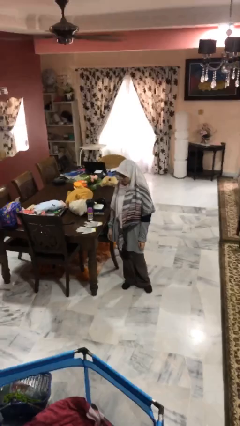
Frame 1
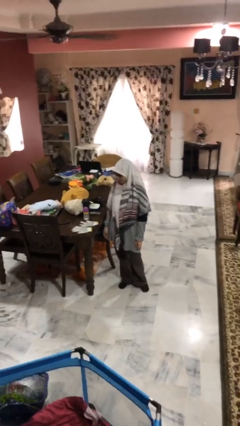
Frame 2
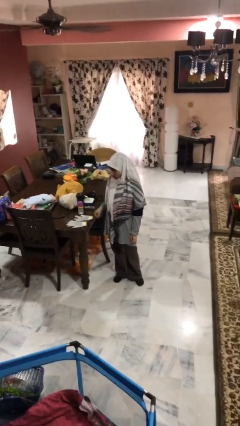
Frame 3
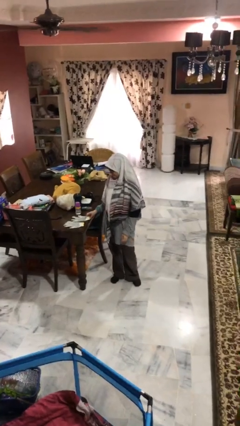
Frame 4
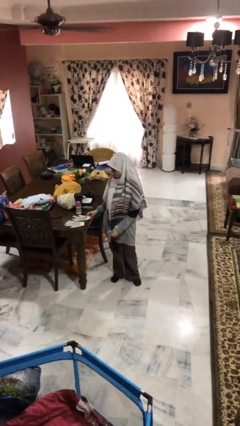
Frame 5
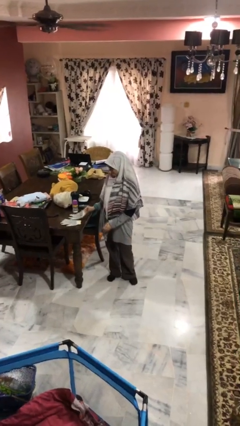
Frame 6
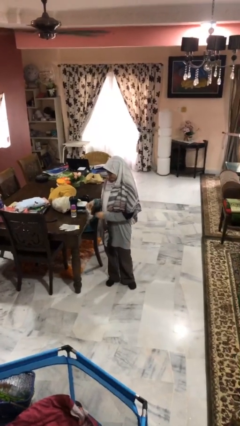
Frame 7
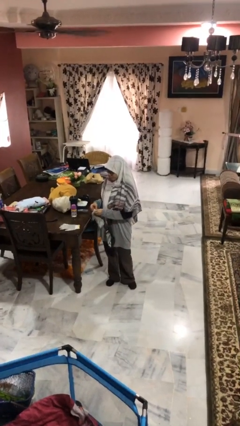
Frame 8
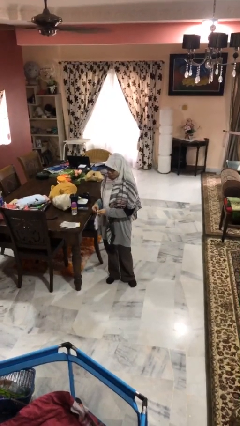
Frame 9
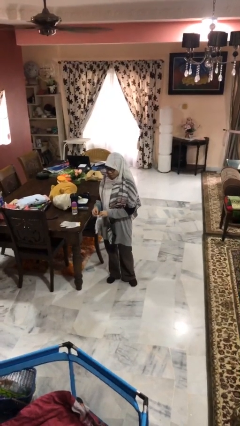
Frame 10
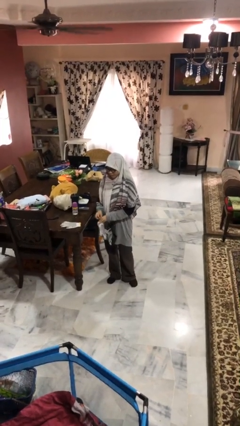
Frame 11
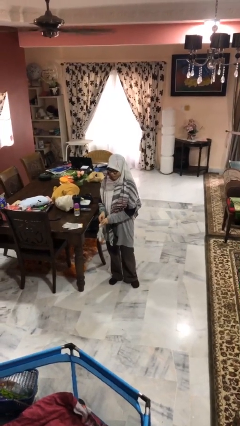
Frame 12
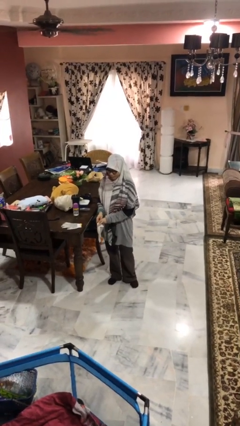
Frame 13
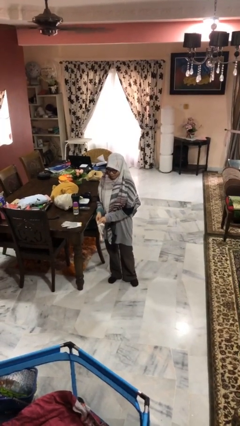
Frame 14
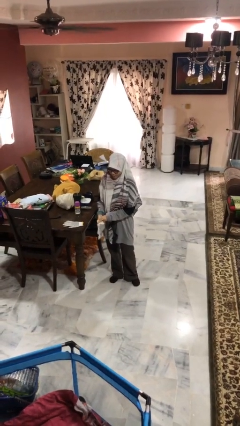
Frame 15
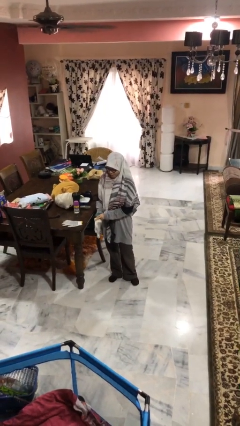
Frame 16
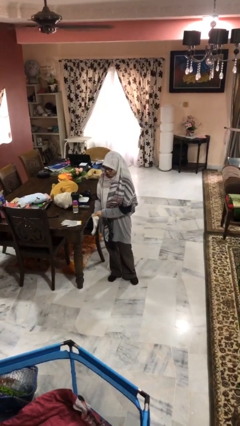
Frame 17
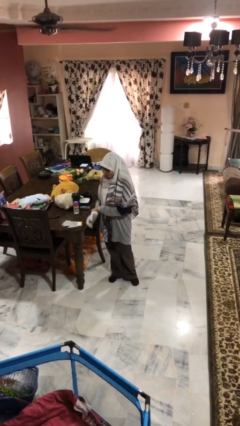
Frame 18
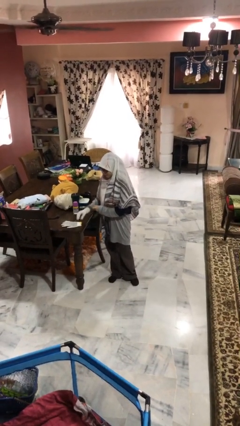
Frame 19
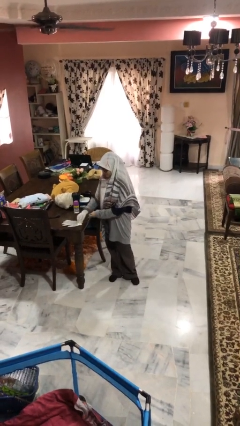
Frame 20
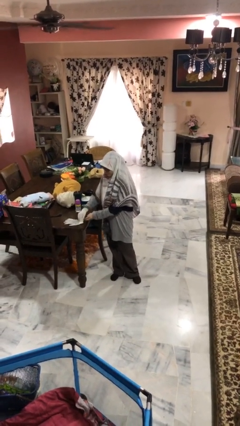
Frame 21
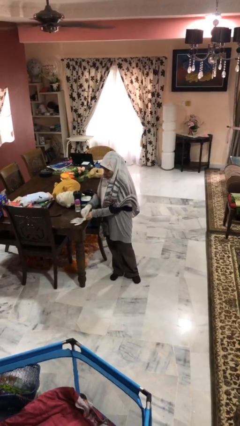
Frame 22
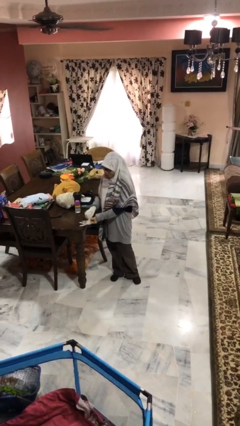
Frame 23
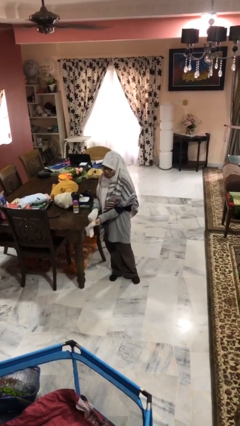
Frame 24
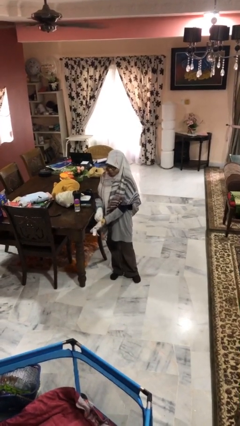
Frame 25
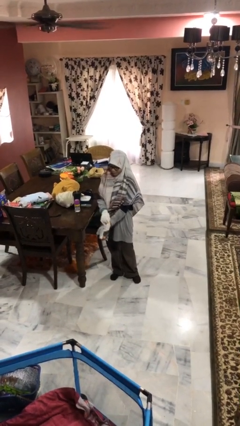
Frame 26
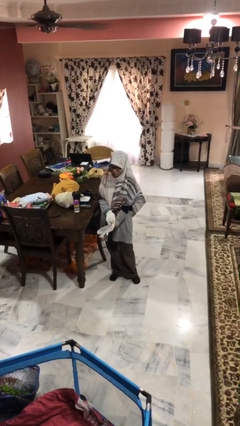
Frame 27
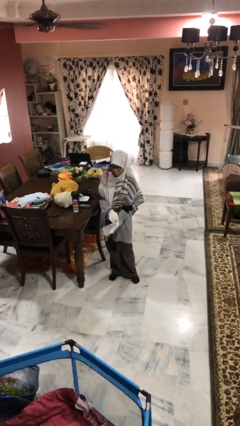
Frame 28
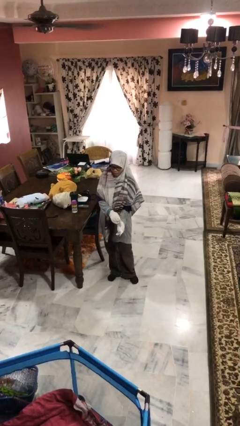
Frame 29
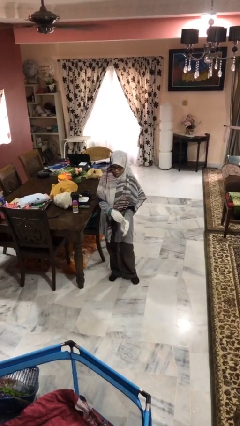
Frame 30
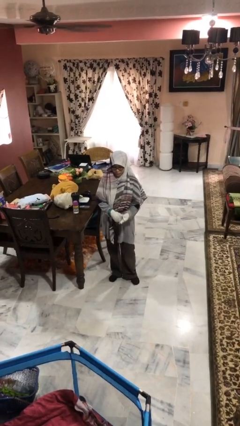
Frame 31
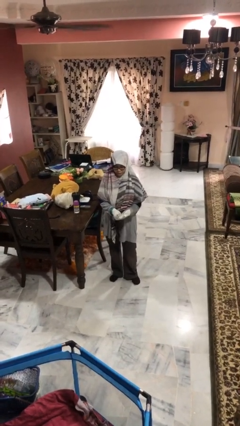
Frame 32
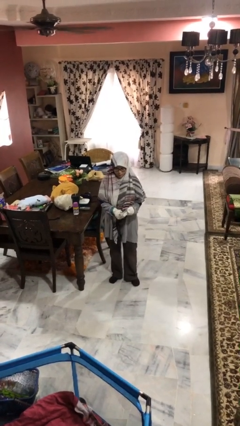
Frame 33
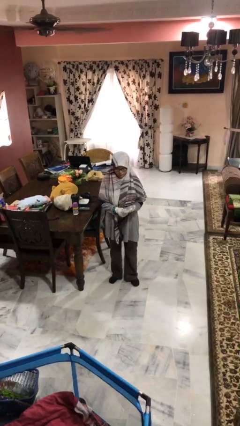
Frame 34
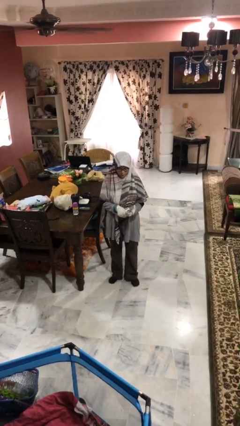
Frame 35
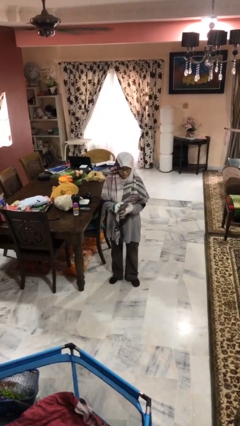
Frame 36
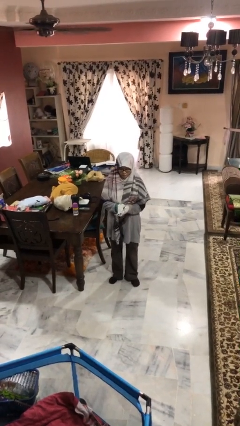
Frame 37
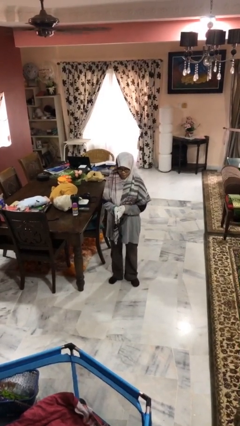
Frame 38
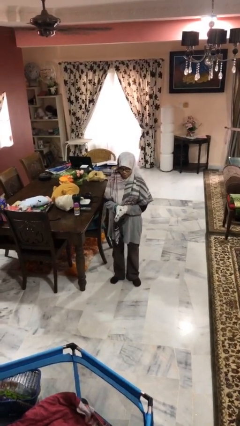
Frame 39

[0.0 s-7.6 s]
person puts on gloves

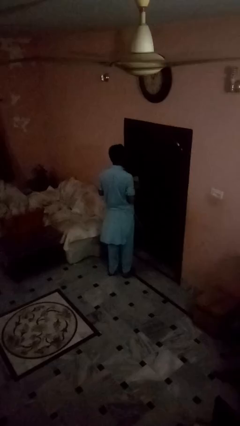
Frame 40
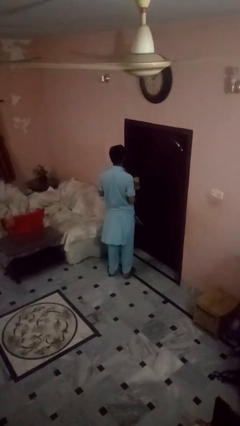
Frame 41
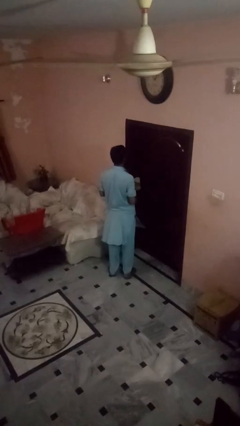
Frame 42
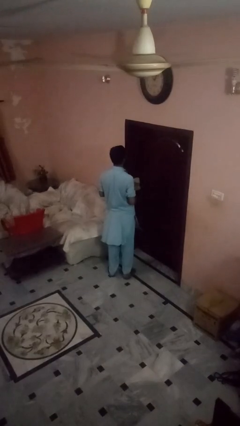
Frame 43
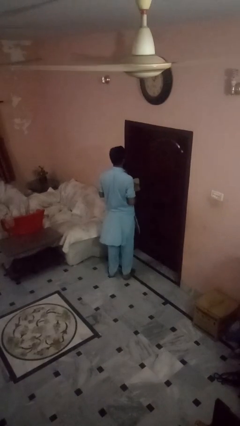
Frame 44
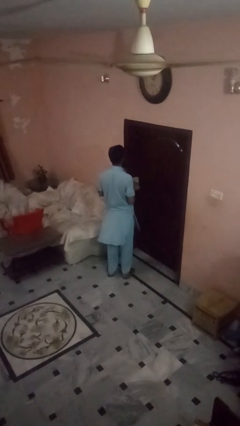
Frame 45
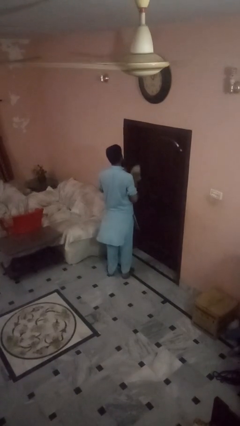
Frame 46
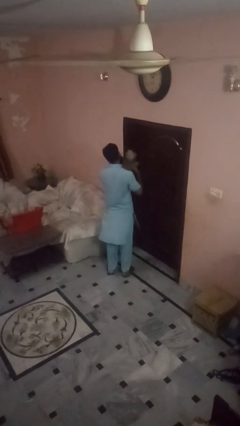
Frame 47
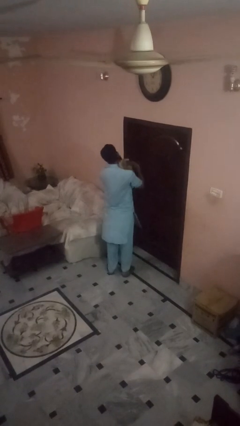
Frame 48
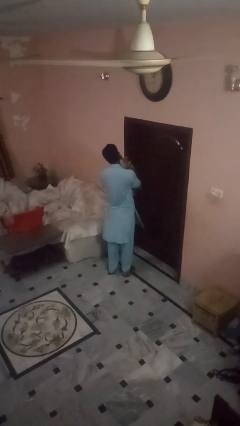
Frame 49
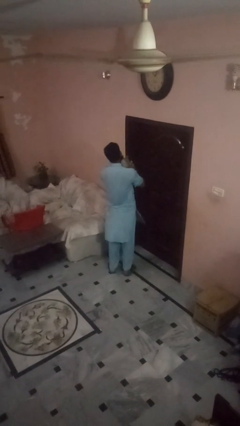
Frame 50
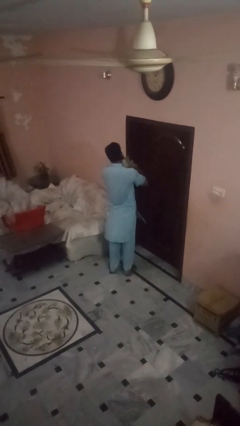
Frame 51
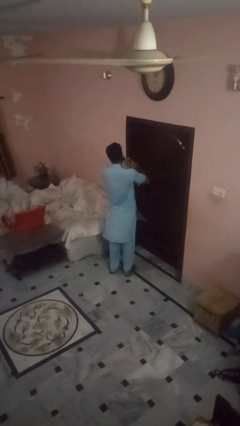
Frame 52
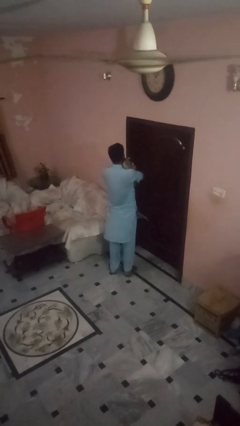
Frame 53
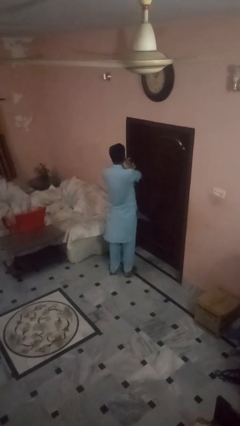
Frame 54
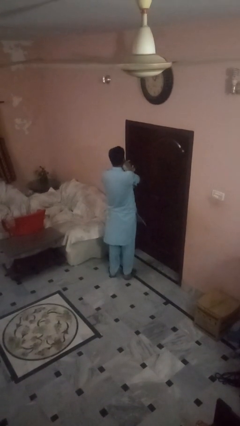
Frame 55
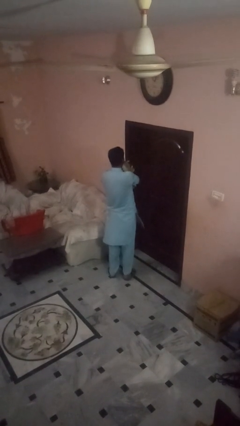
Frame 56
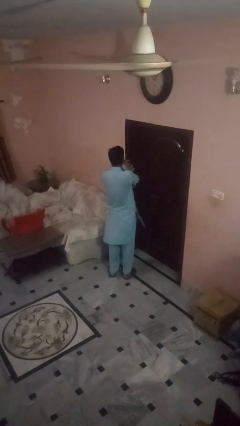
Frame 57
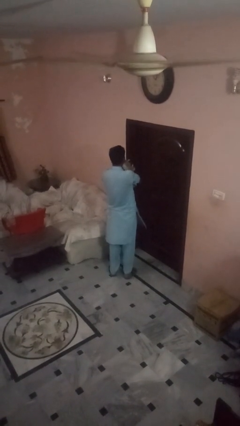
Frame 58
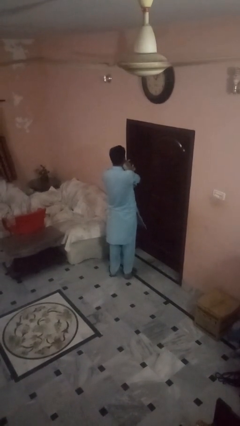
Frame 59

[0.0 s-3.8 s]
person hugs stuffed animal

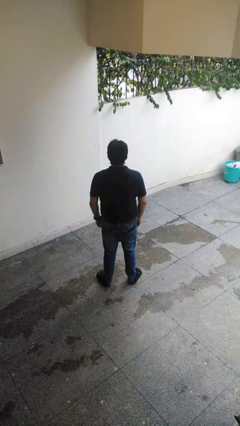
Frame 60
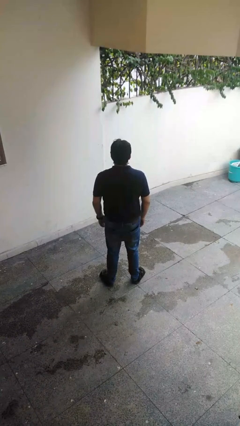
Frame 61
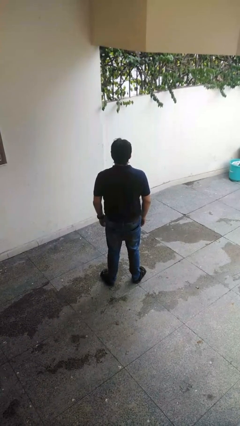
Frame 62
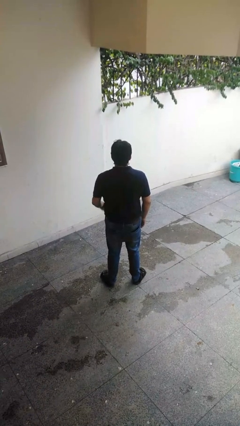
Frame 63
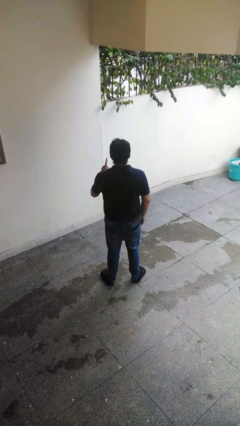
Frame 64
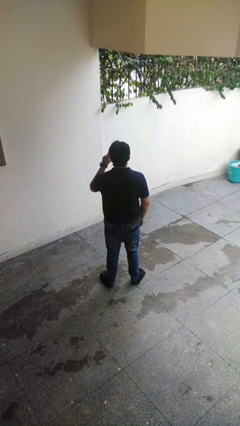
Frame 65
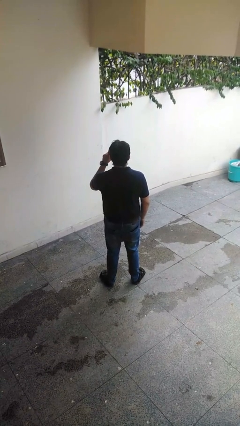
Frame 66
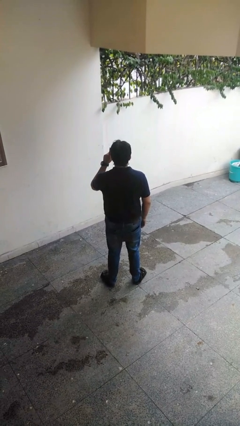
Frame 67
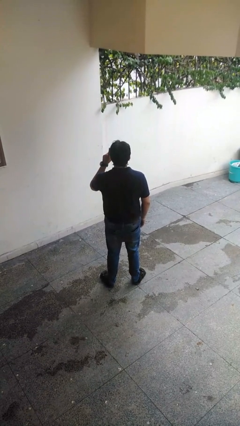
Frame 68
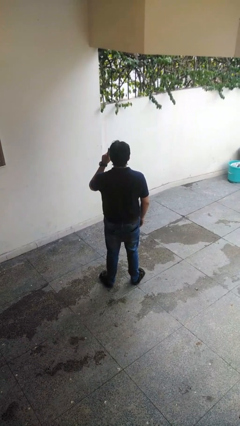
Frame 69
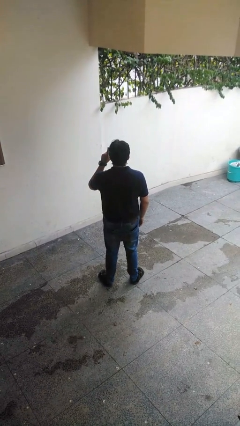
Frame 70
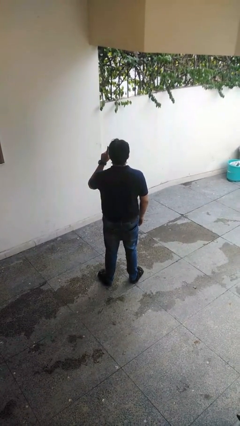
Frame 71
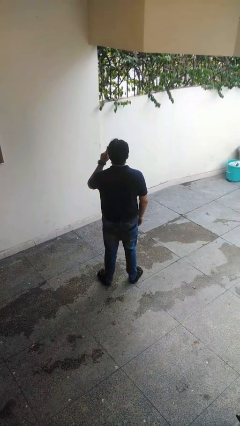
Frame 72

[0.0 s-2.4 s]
person gestures number one

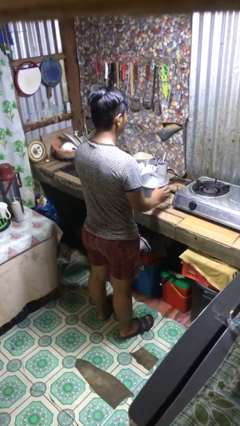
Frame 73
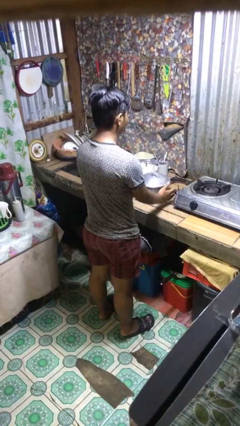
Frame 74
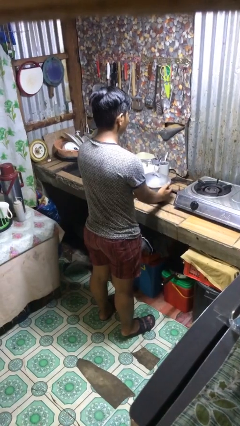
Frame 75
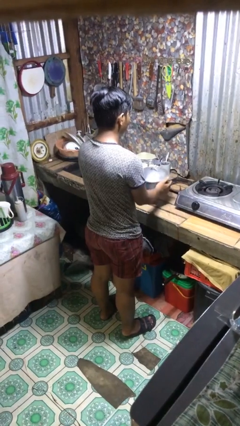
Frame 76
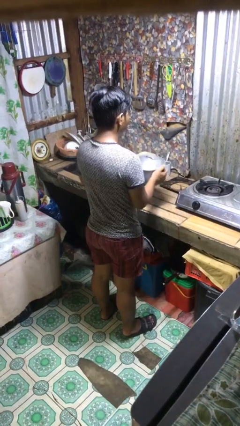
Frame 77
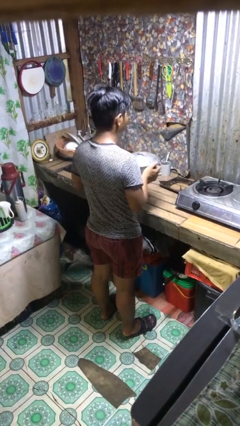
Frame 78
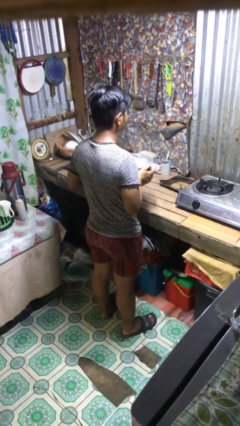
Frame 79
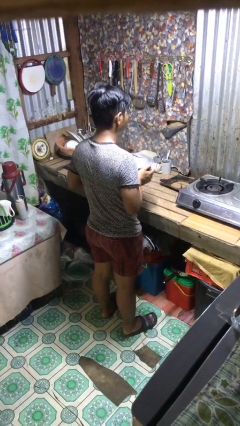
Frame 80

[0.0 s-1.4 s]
person picks up object from countertop

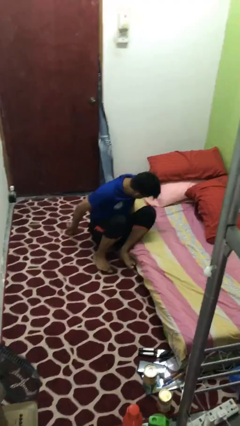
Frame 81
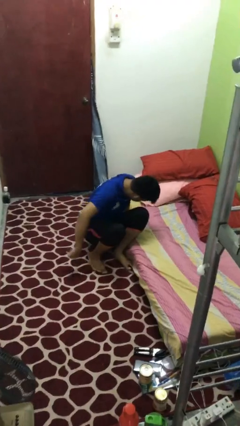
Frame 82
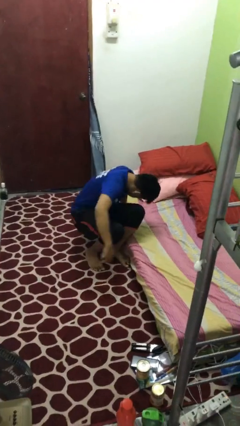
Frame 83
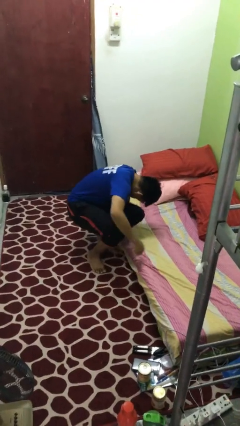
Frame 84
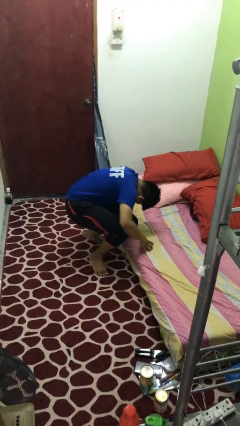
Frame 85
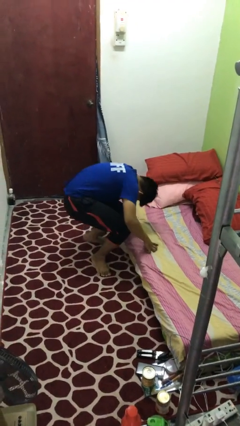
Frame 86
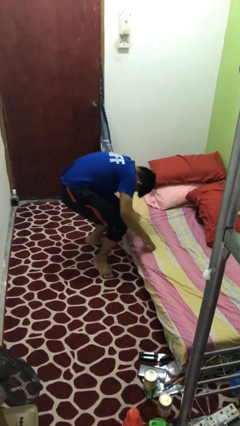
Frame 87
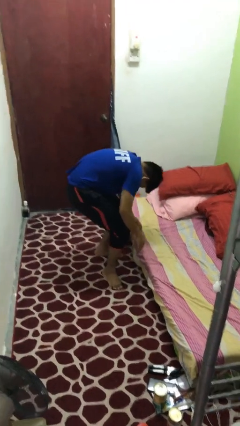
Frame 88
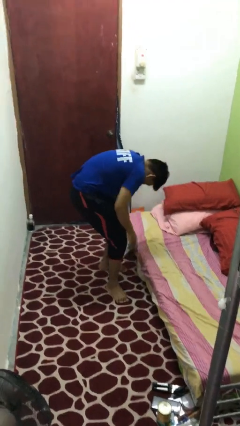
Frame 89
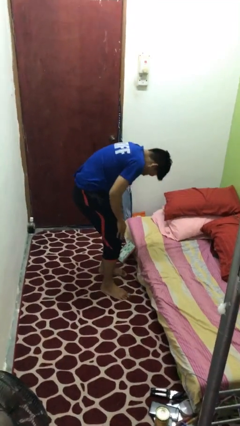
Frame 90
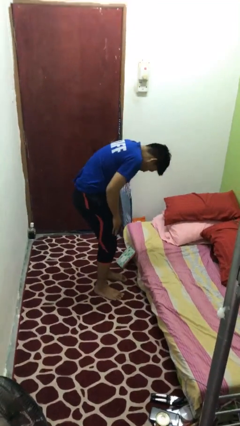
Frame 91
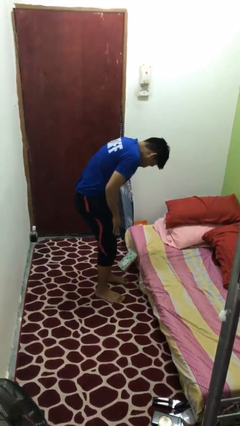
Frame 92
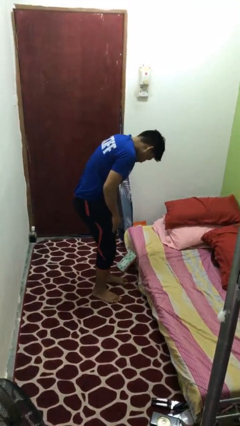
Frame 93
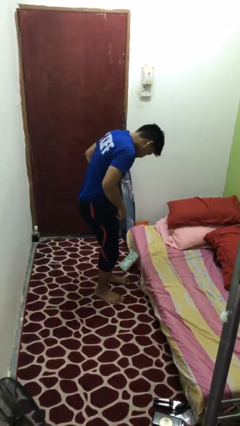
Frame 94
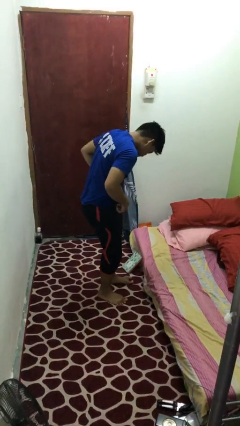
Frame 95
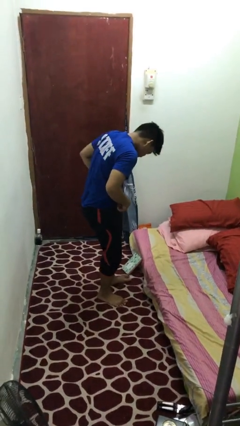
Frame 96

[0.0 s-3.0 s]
person stands up from floor
